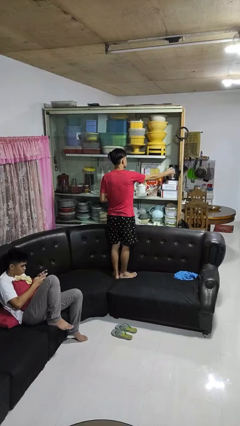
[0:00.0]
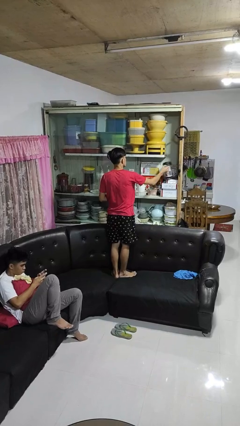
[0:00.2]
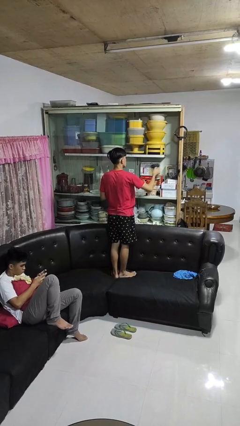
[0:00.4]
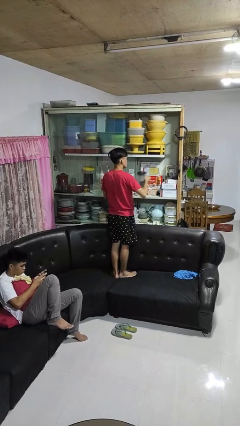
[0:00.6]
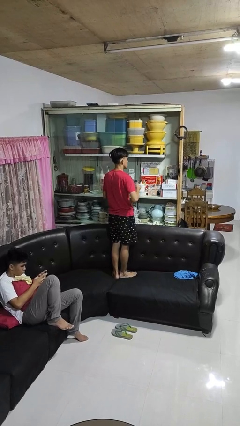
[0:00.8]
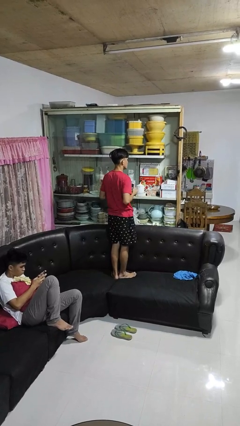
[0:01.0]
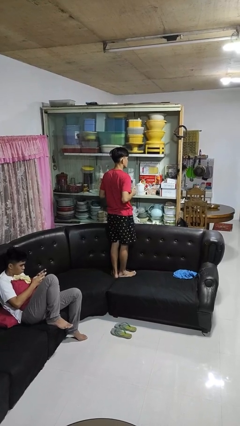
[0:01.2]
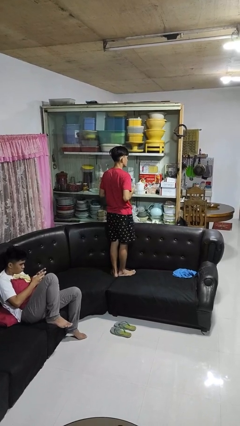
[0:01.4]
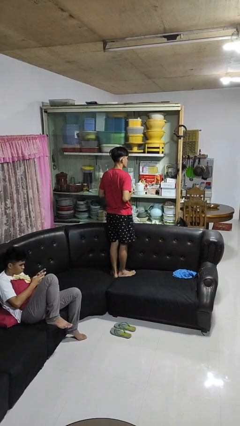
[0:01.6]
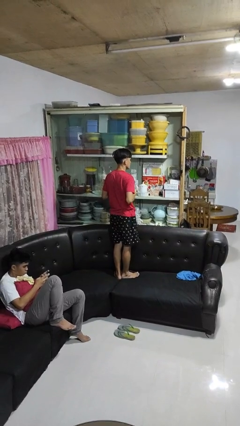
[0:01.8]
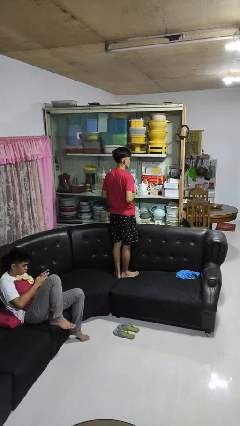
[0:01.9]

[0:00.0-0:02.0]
person picks up object from cabinet

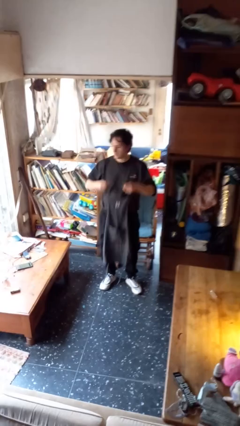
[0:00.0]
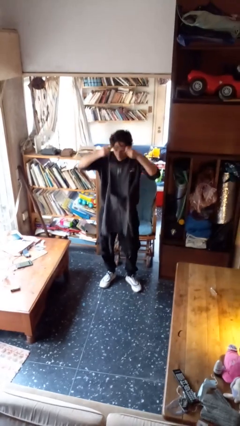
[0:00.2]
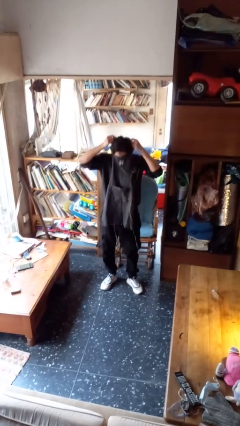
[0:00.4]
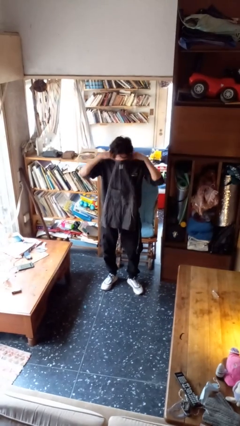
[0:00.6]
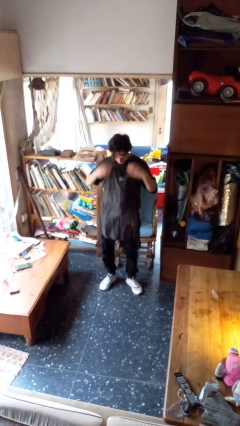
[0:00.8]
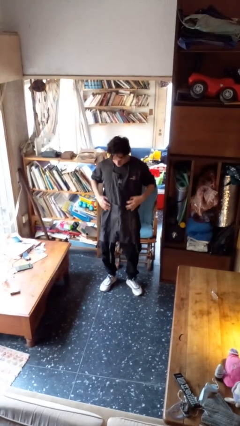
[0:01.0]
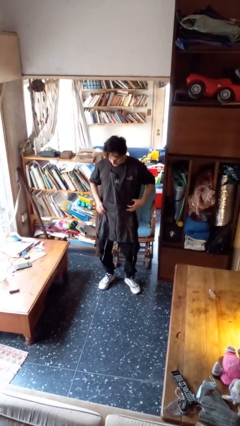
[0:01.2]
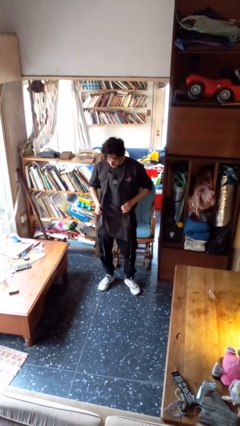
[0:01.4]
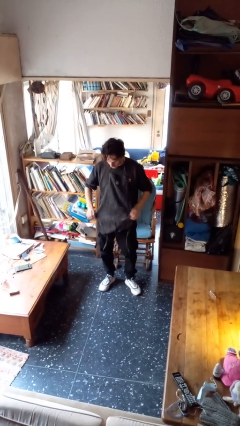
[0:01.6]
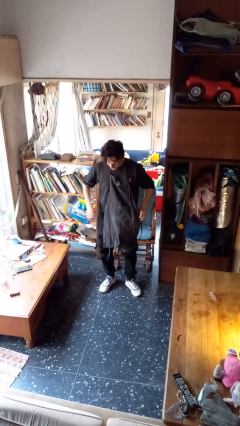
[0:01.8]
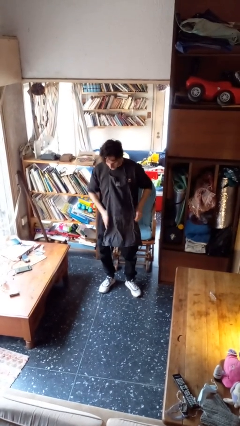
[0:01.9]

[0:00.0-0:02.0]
person puts on apron

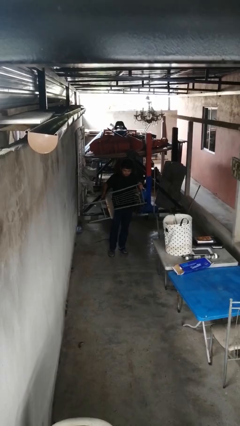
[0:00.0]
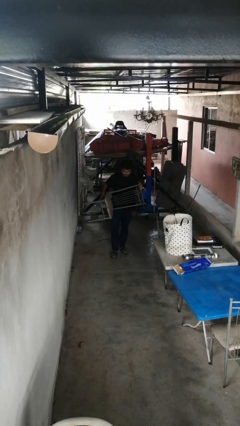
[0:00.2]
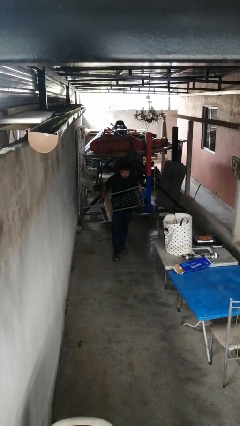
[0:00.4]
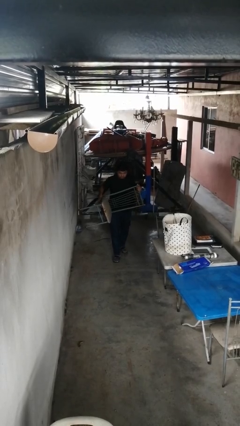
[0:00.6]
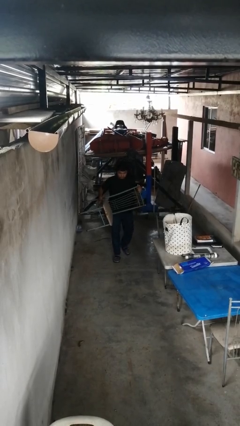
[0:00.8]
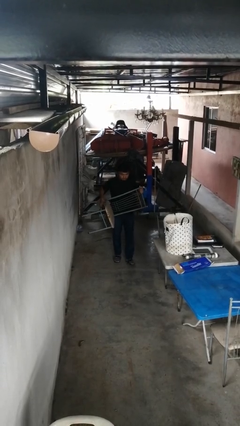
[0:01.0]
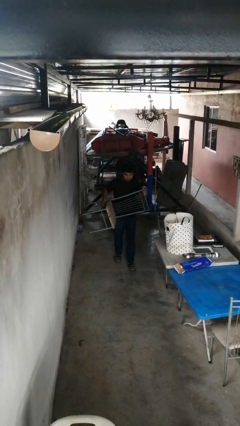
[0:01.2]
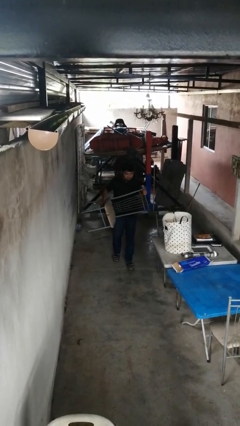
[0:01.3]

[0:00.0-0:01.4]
person carries furniture

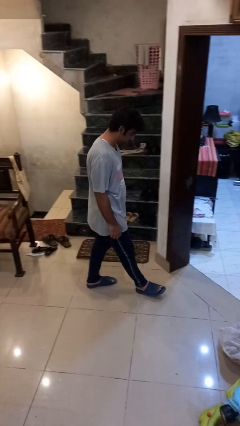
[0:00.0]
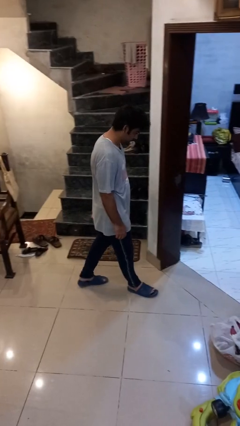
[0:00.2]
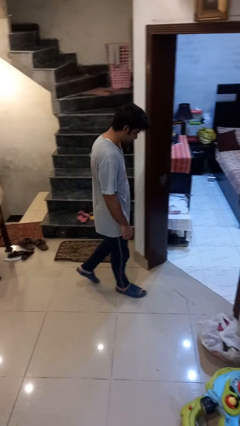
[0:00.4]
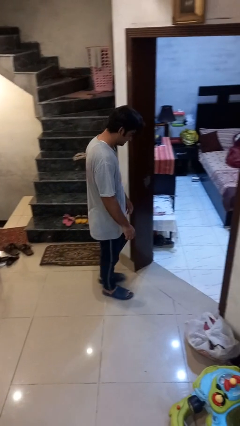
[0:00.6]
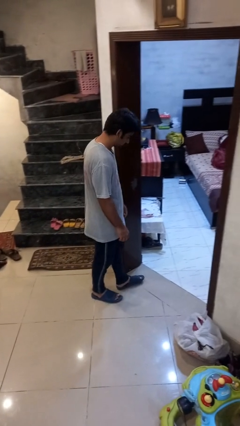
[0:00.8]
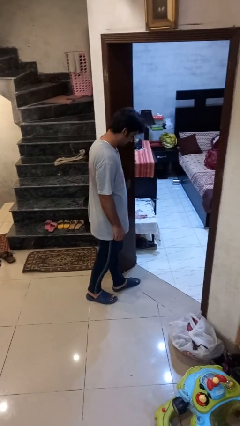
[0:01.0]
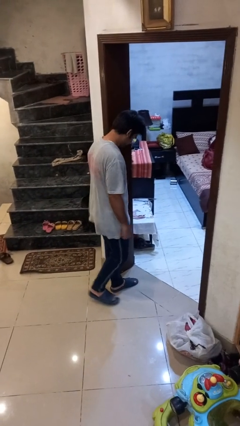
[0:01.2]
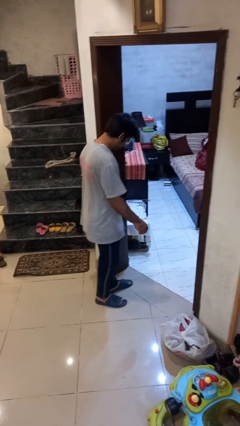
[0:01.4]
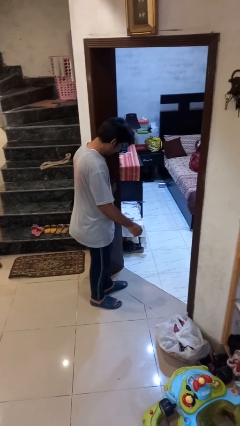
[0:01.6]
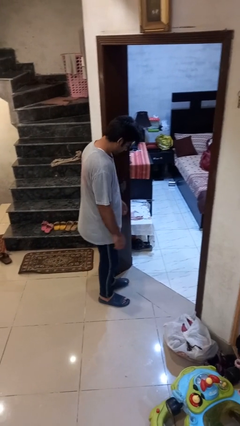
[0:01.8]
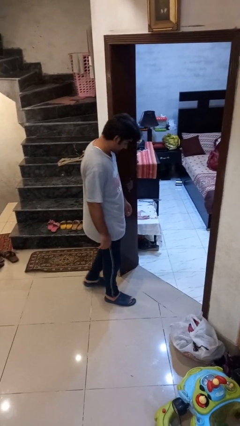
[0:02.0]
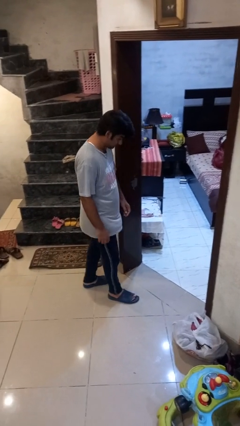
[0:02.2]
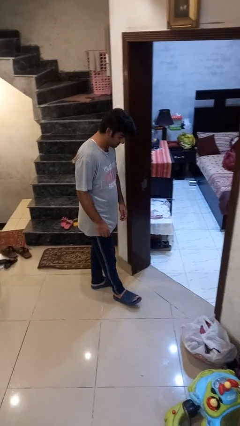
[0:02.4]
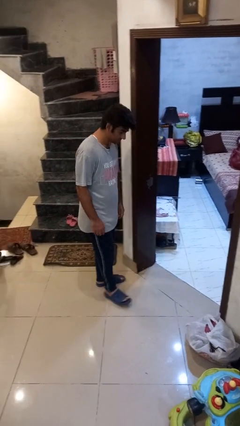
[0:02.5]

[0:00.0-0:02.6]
person bumps into wall

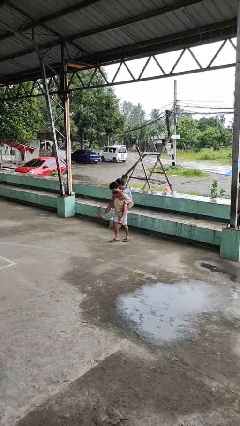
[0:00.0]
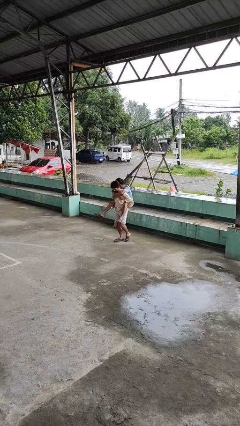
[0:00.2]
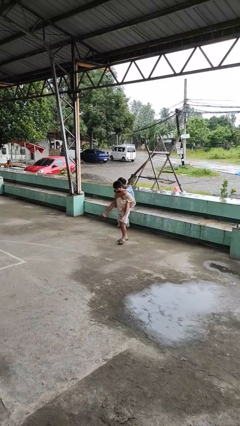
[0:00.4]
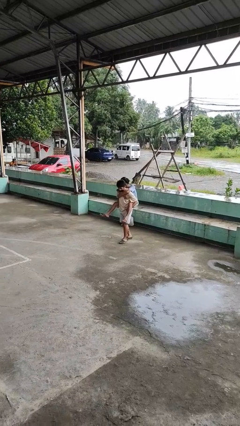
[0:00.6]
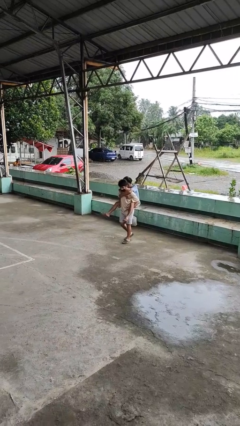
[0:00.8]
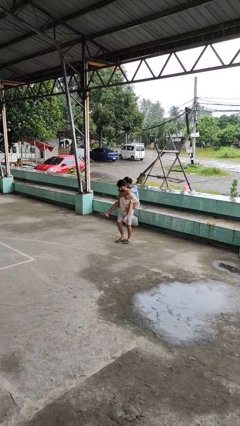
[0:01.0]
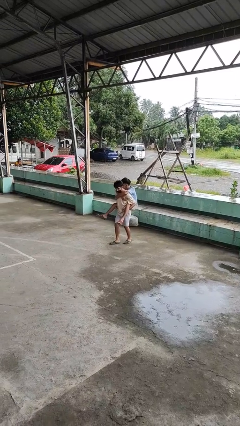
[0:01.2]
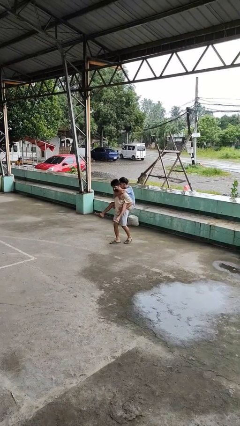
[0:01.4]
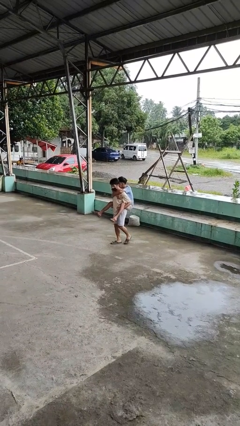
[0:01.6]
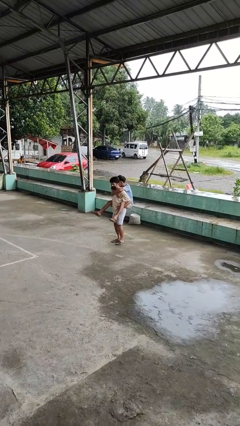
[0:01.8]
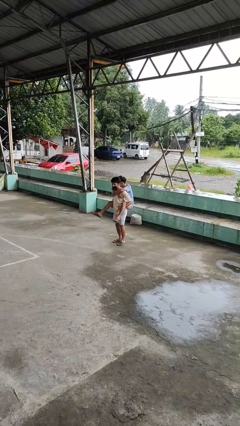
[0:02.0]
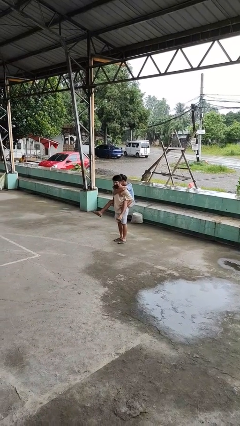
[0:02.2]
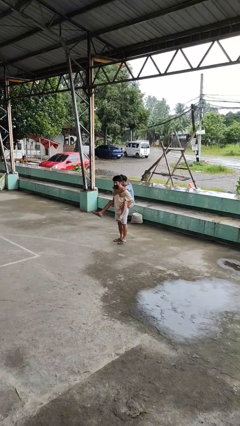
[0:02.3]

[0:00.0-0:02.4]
person carries person on back

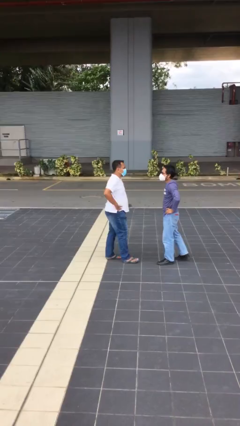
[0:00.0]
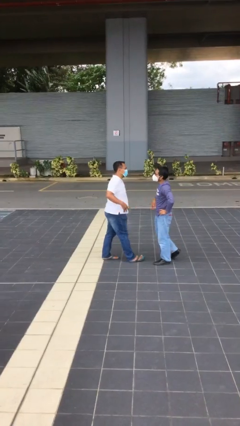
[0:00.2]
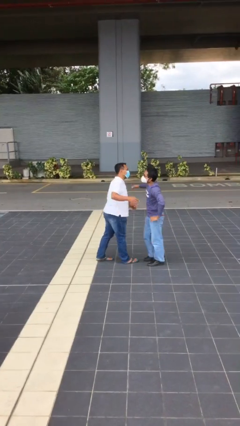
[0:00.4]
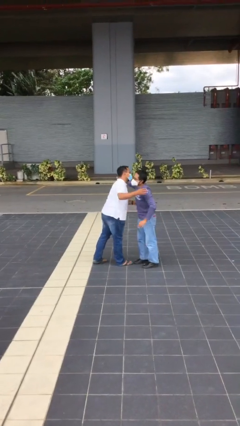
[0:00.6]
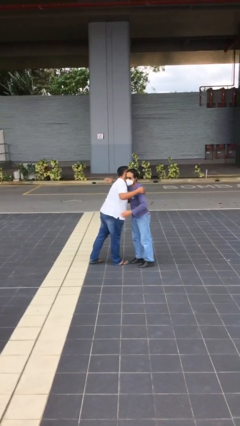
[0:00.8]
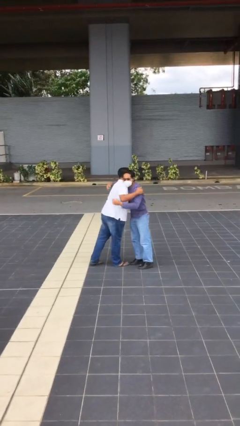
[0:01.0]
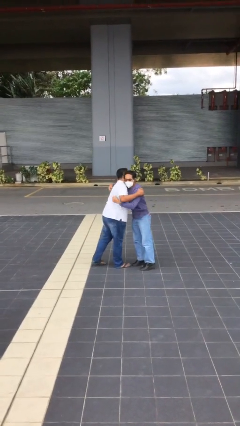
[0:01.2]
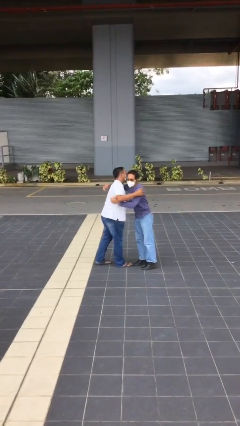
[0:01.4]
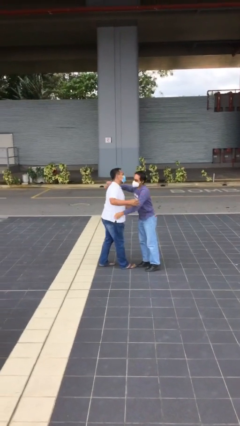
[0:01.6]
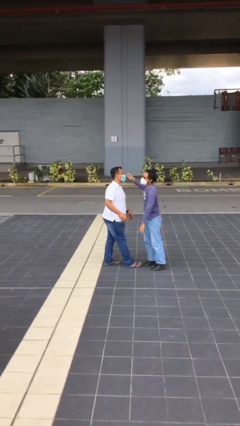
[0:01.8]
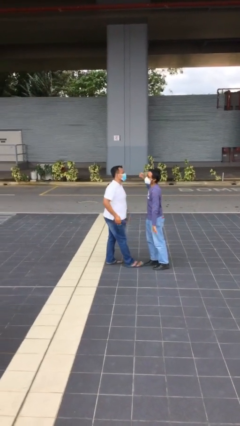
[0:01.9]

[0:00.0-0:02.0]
person embraces person

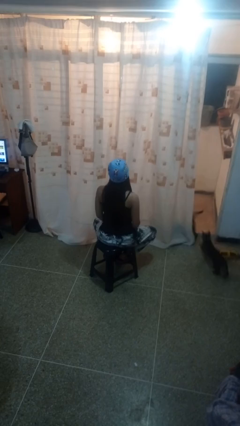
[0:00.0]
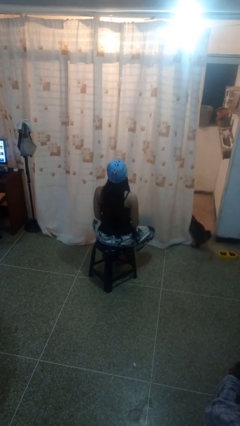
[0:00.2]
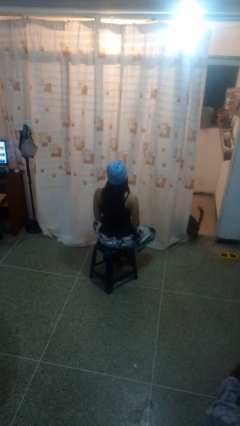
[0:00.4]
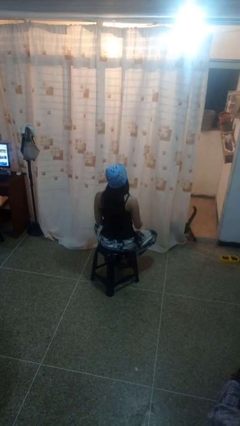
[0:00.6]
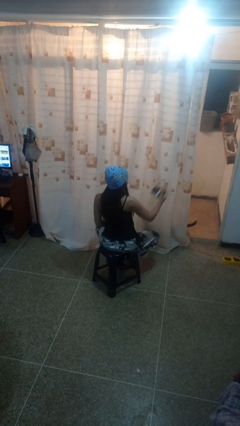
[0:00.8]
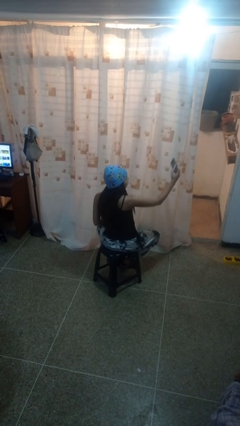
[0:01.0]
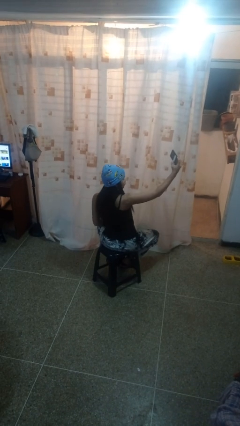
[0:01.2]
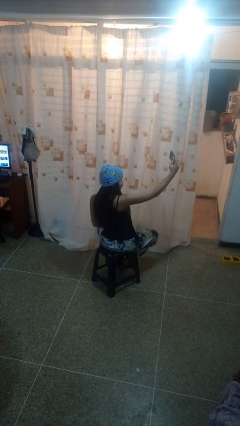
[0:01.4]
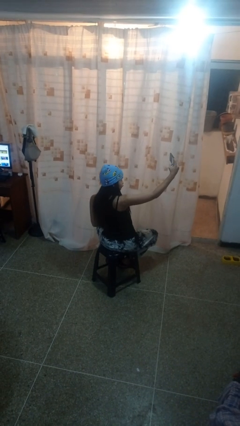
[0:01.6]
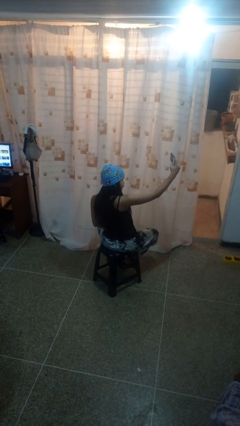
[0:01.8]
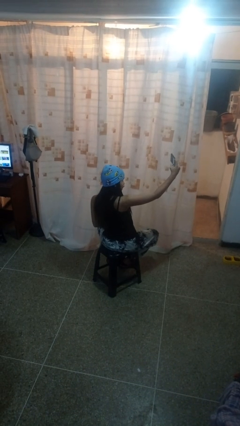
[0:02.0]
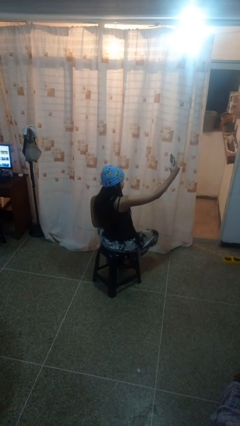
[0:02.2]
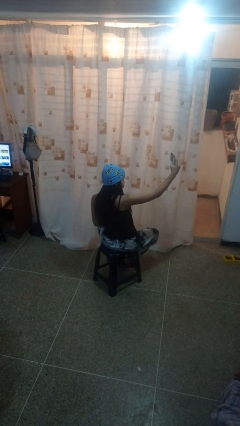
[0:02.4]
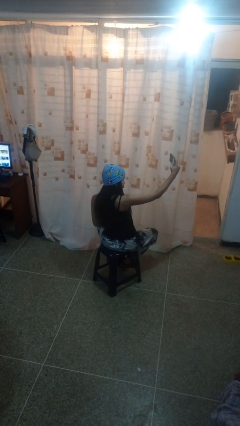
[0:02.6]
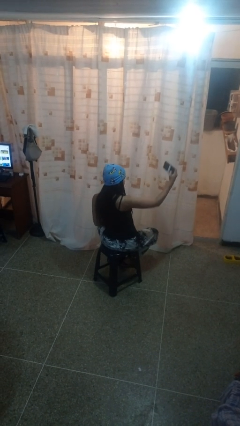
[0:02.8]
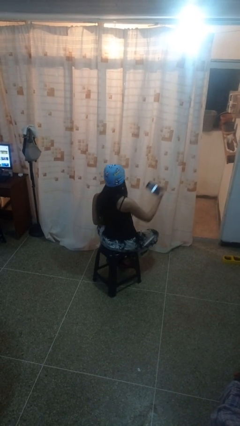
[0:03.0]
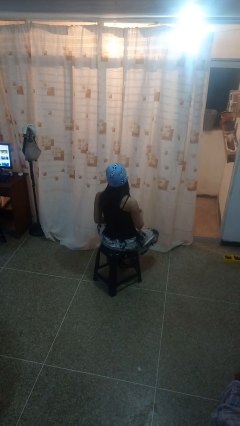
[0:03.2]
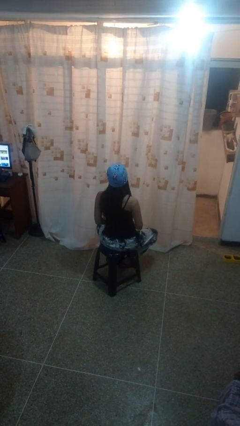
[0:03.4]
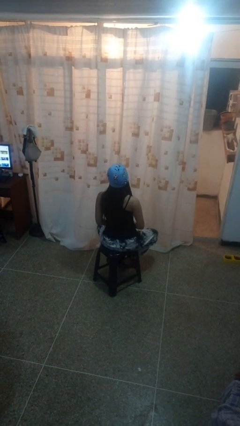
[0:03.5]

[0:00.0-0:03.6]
person takes selfie

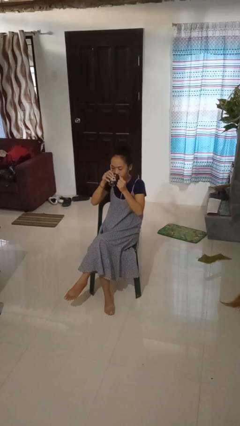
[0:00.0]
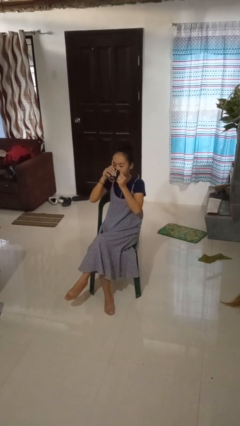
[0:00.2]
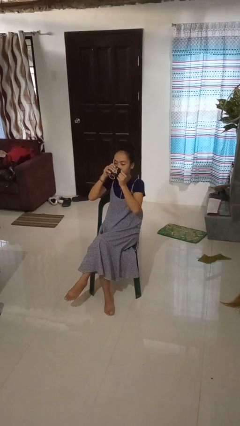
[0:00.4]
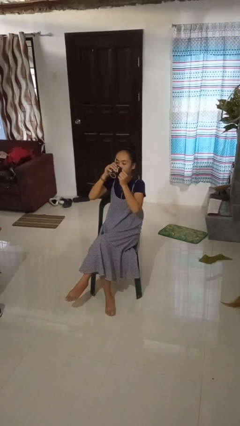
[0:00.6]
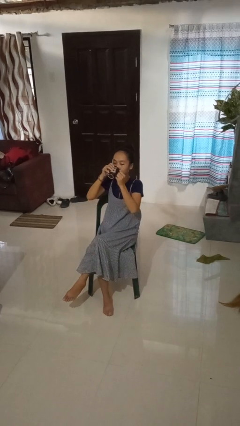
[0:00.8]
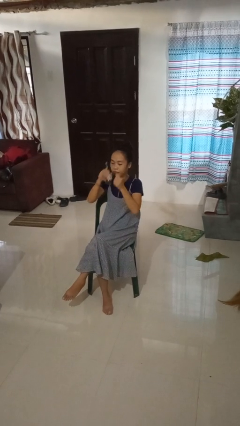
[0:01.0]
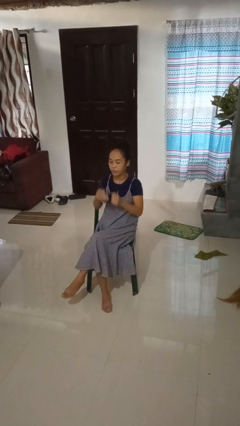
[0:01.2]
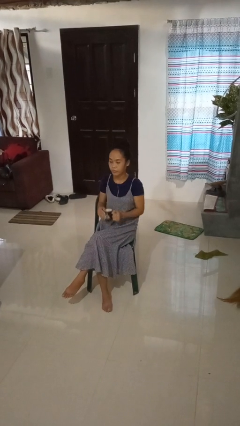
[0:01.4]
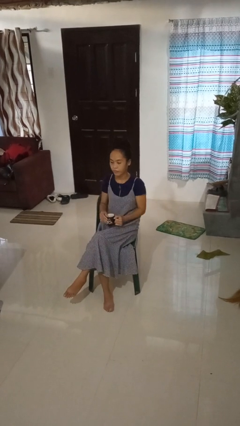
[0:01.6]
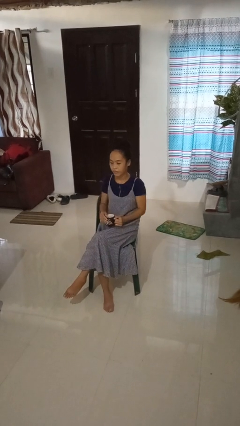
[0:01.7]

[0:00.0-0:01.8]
person drinks from mug
